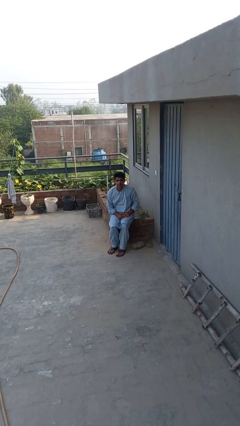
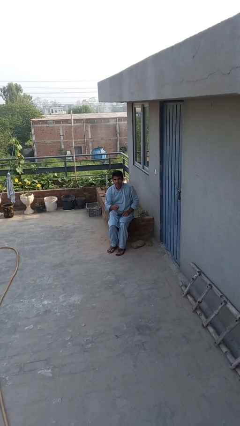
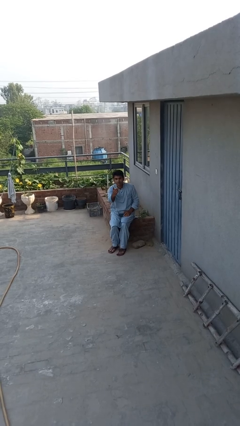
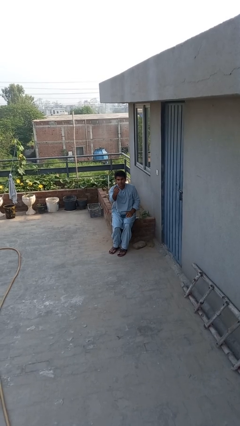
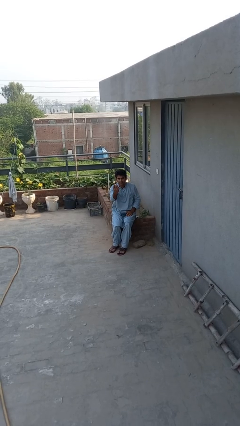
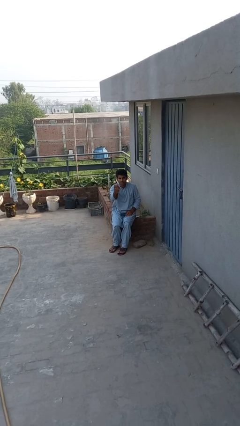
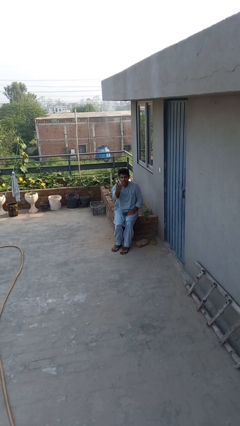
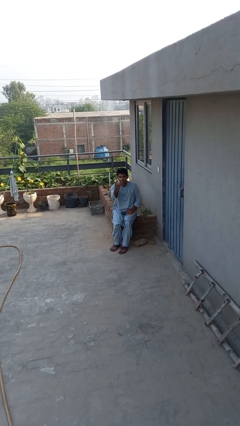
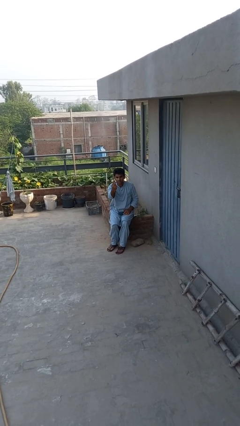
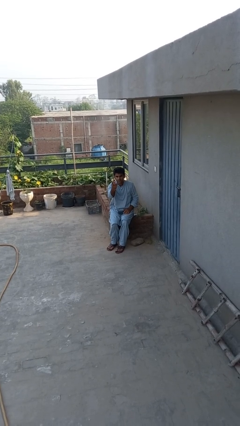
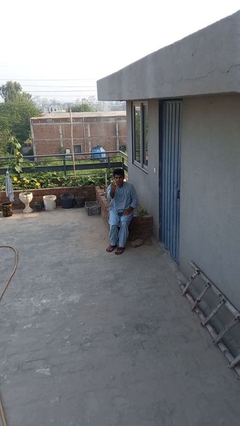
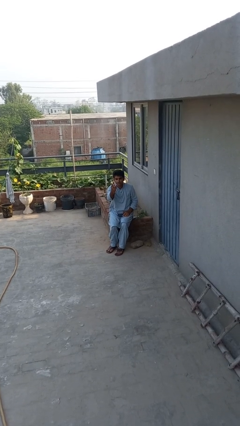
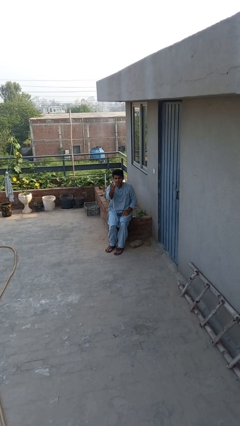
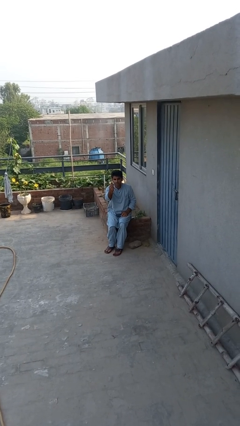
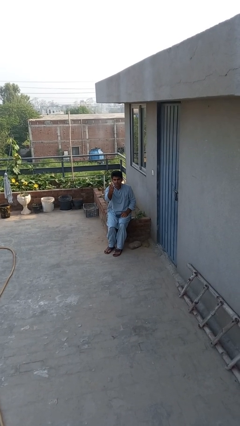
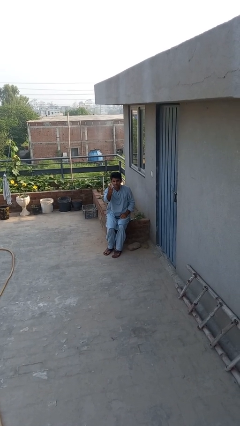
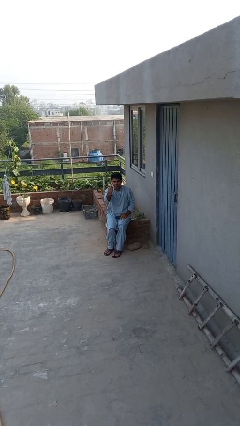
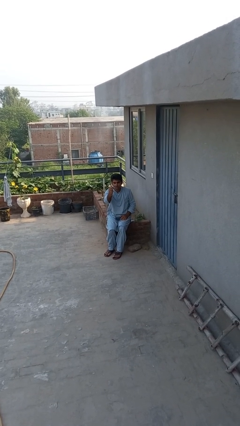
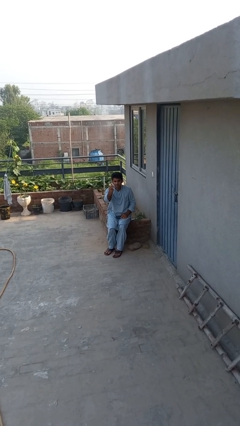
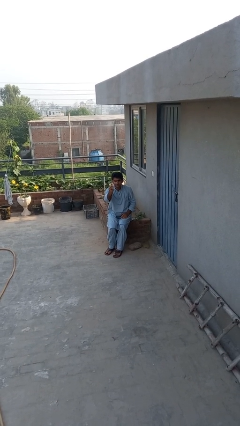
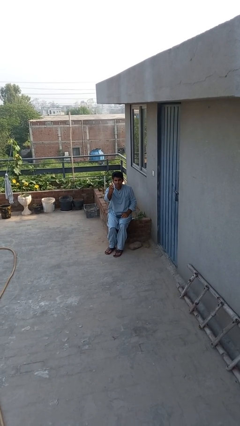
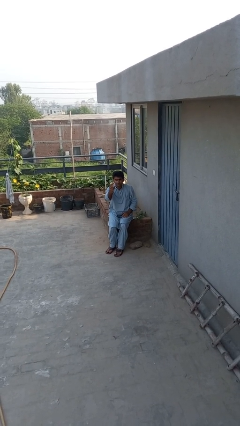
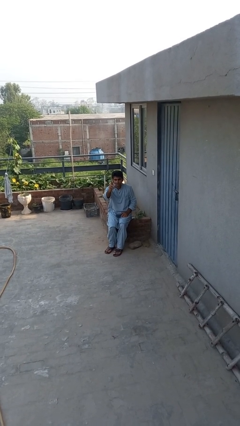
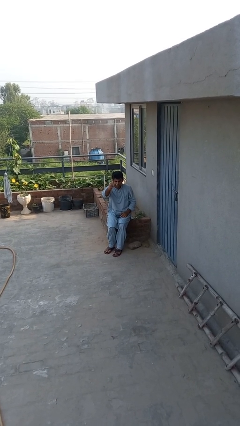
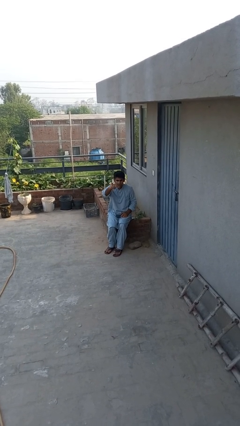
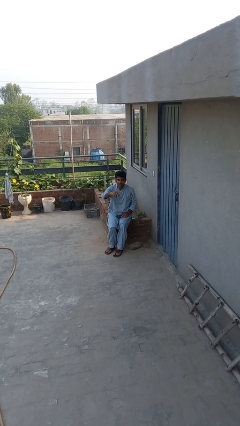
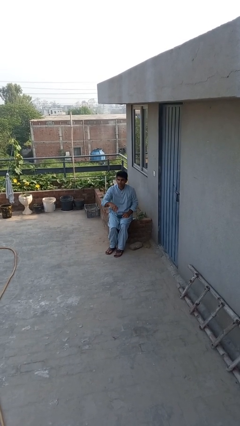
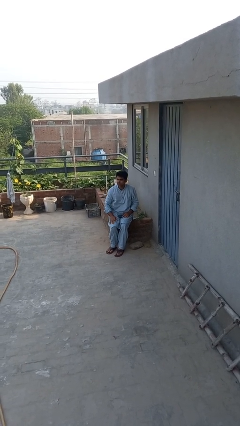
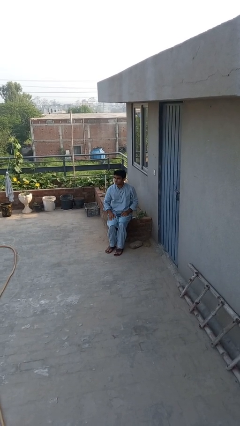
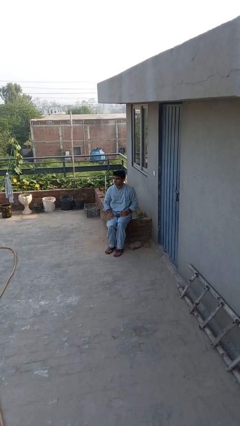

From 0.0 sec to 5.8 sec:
person gestures come here

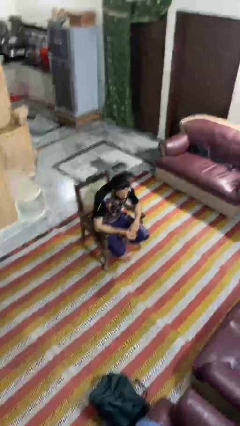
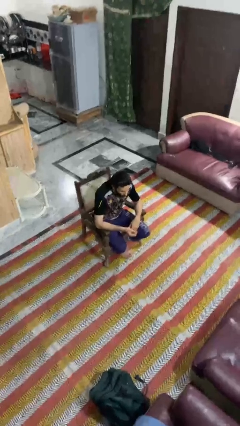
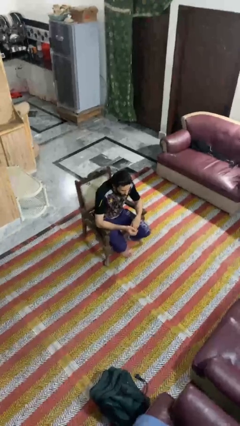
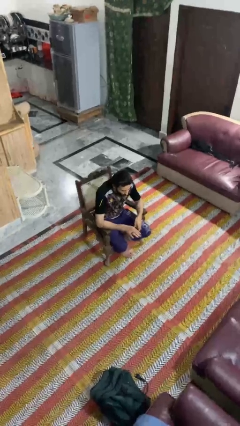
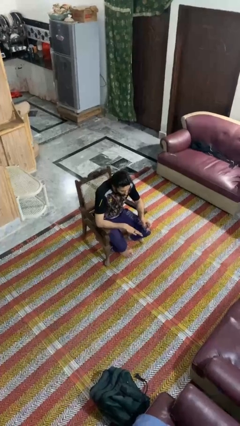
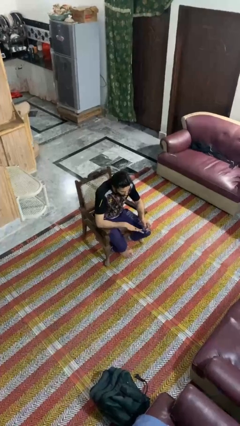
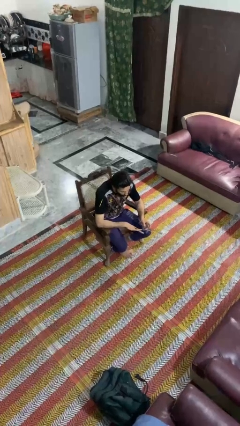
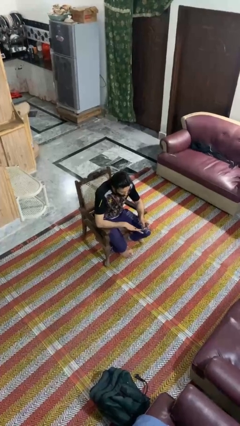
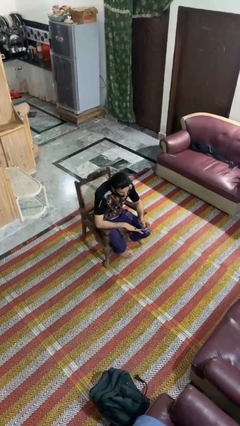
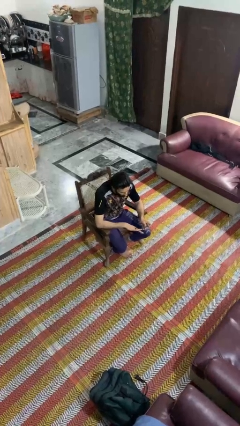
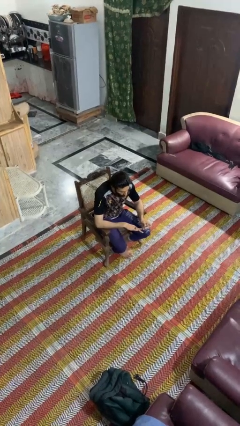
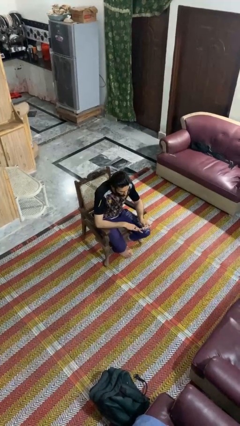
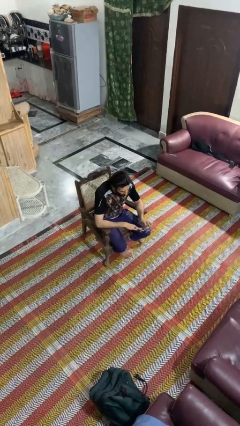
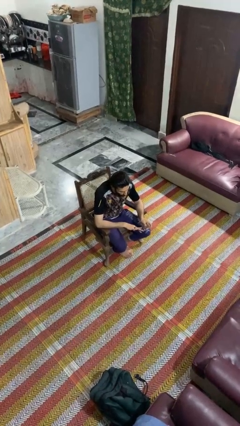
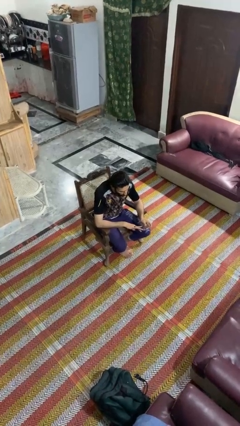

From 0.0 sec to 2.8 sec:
person clips fingernails

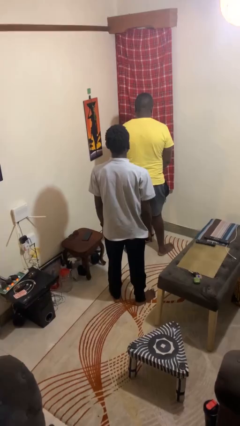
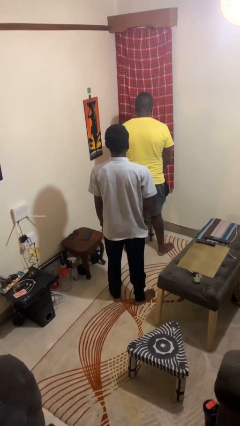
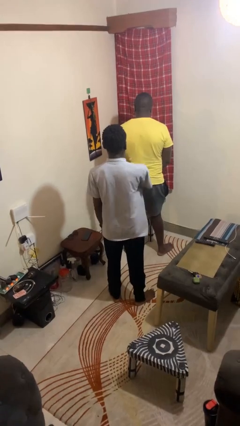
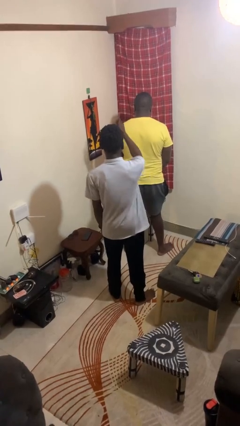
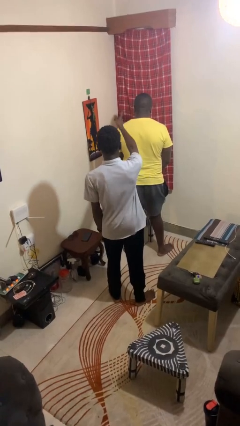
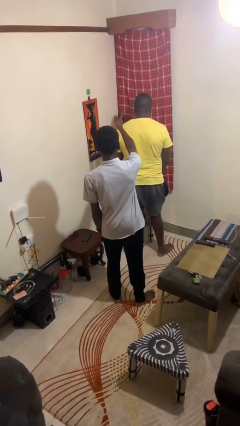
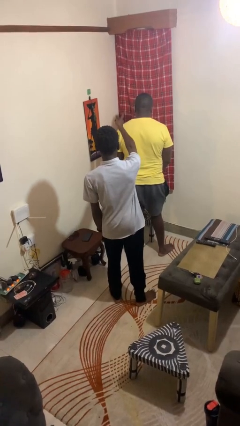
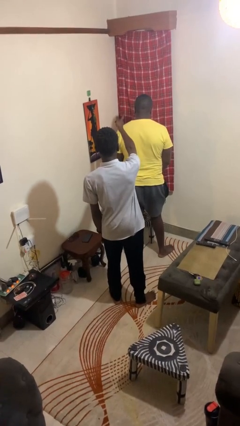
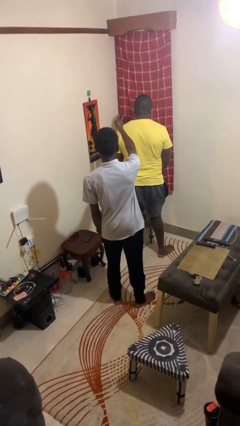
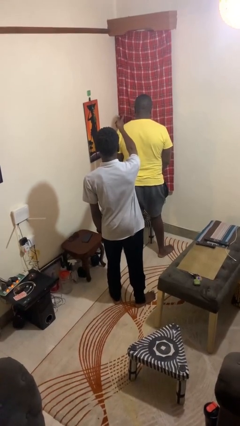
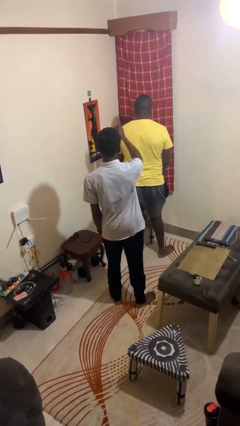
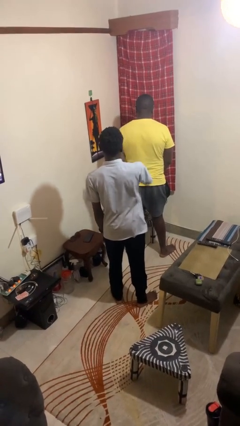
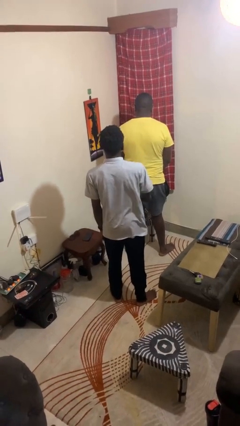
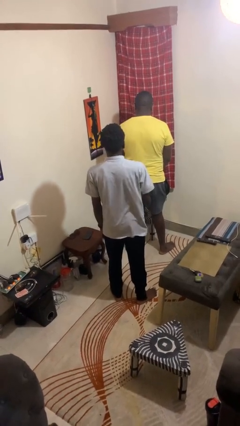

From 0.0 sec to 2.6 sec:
person points at person

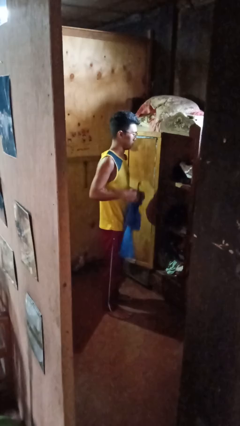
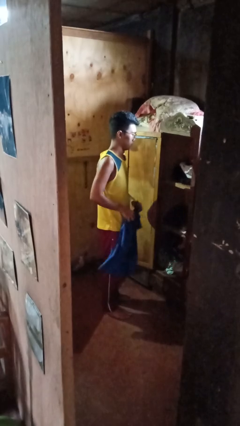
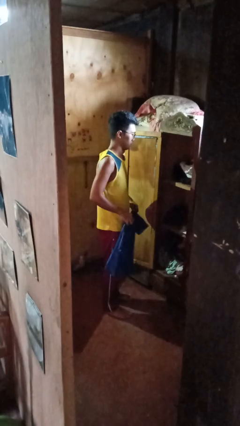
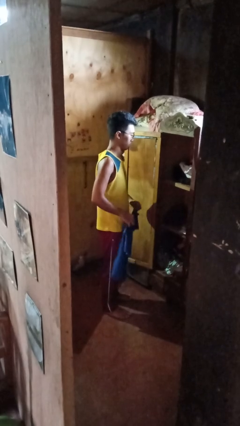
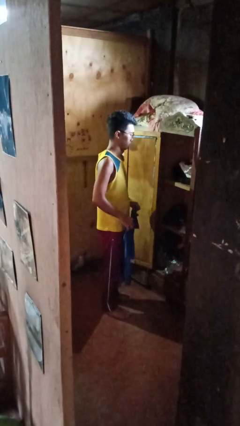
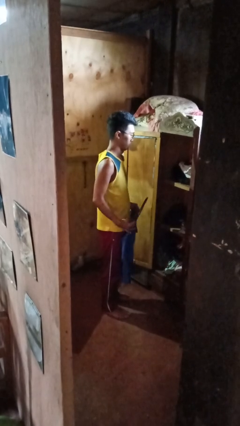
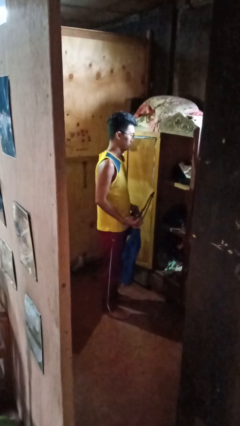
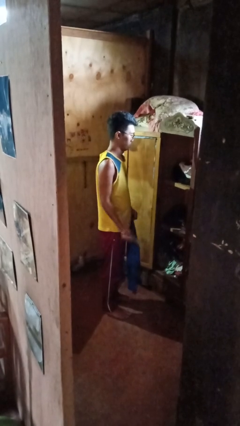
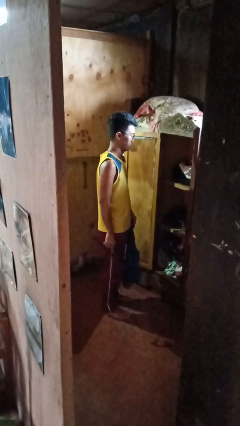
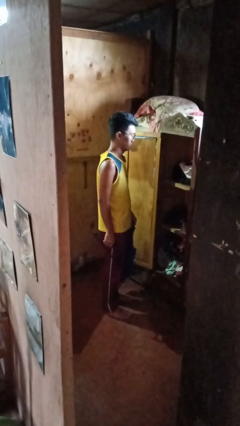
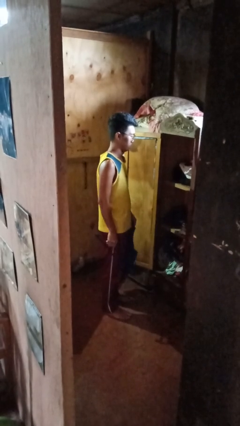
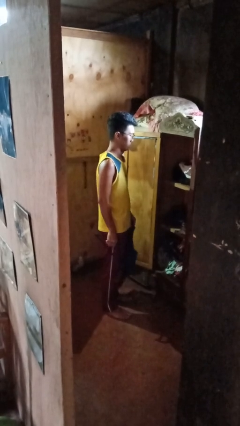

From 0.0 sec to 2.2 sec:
person takes clothes from closet

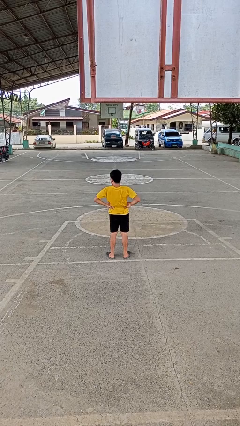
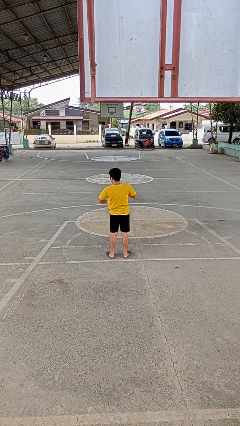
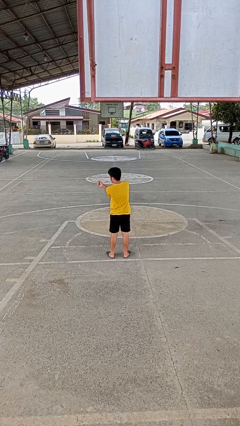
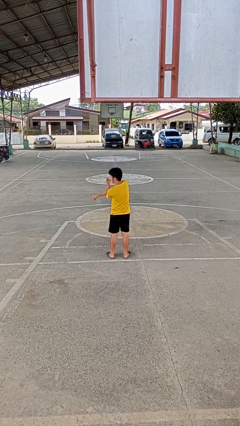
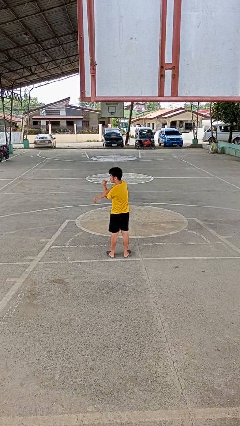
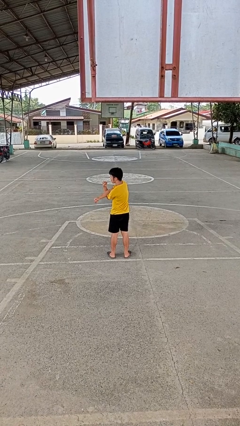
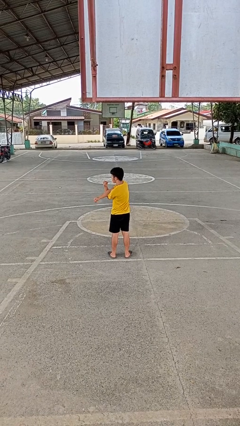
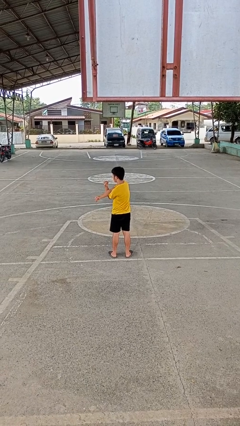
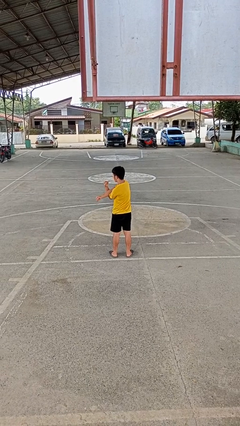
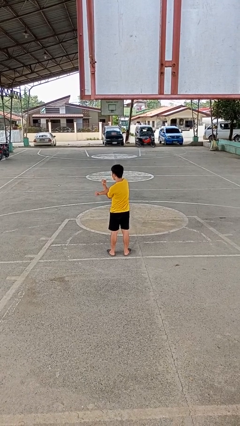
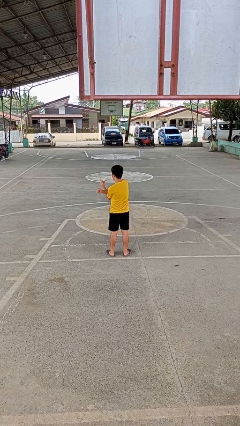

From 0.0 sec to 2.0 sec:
person stretches arms to side

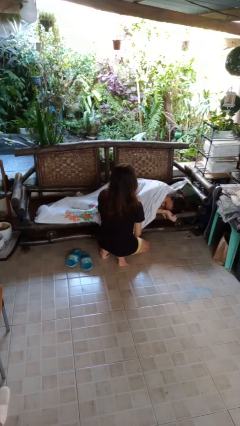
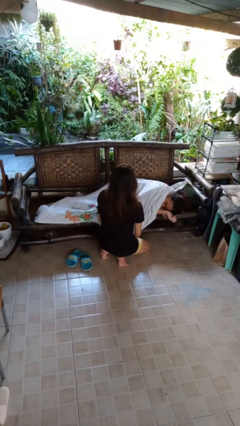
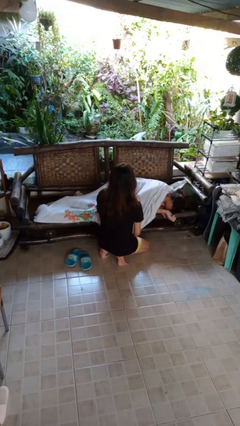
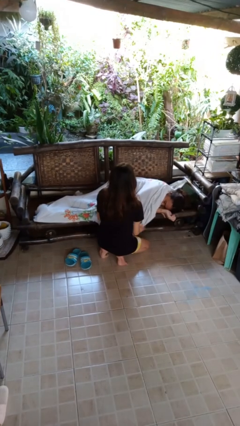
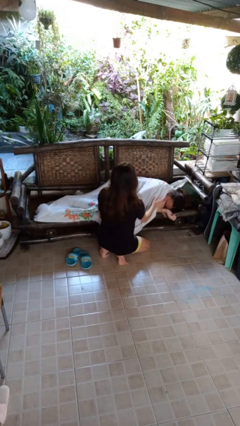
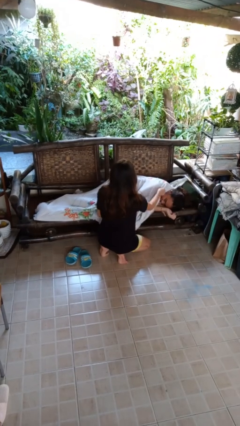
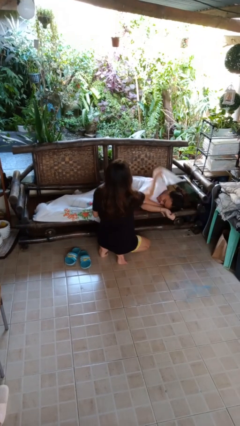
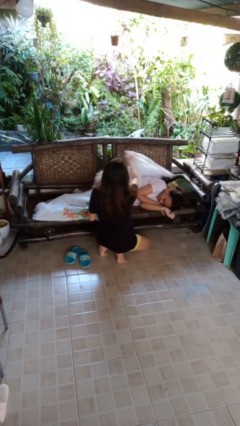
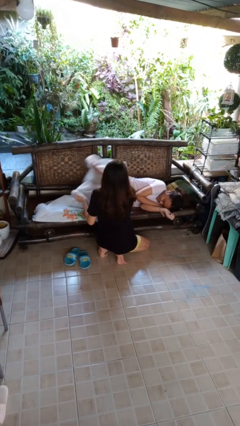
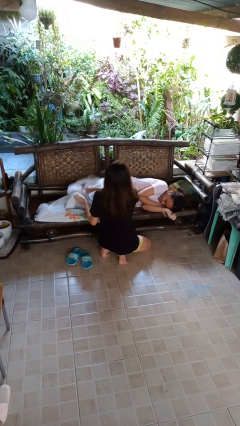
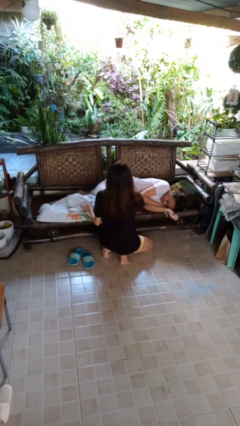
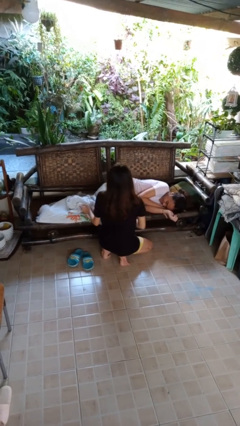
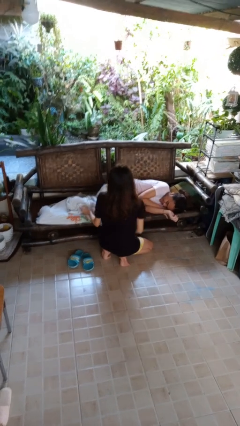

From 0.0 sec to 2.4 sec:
person uncovers friend with blanket
